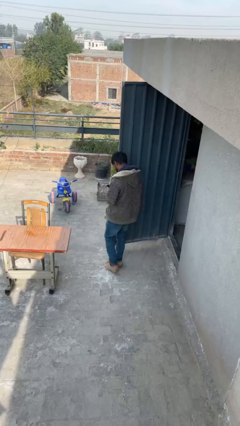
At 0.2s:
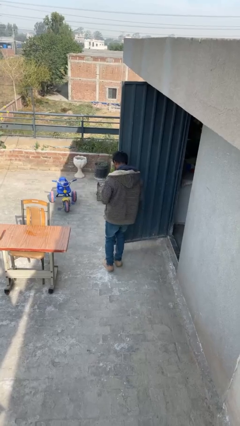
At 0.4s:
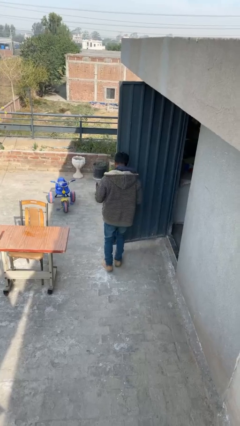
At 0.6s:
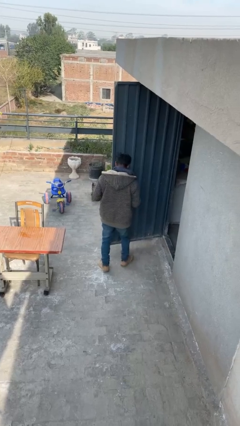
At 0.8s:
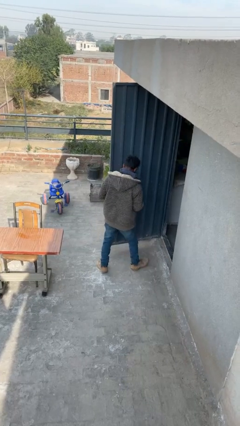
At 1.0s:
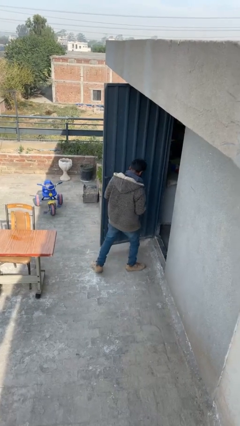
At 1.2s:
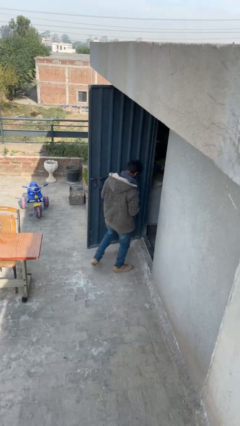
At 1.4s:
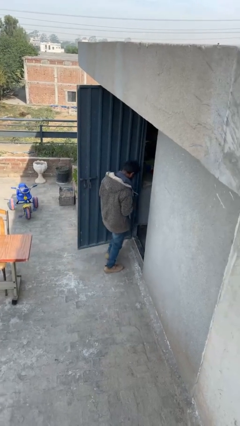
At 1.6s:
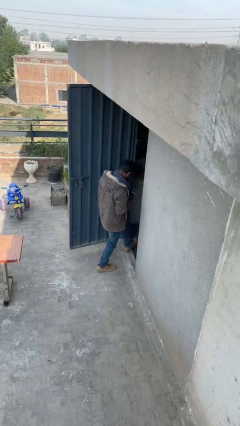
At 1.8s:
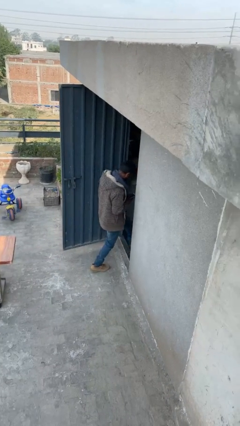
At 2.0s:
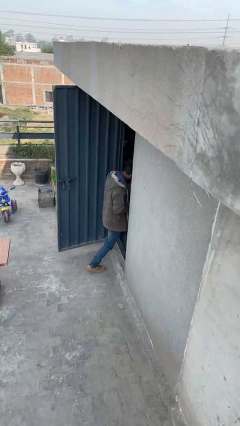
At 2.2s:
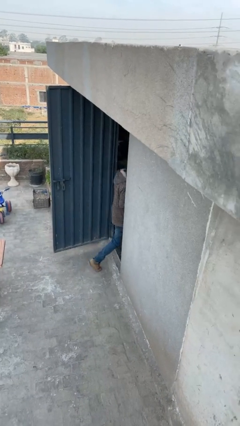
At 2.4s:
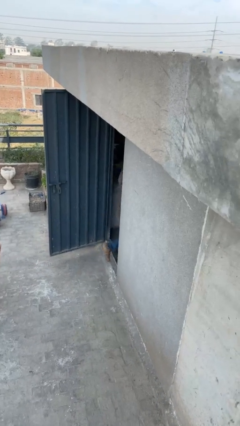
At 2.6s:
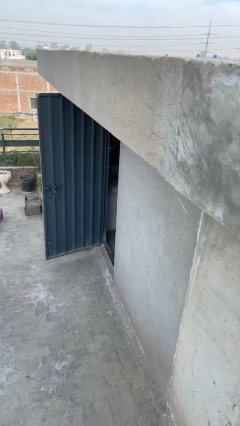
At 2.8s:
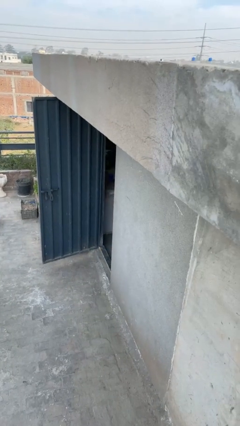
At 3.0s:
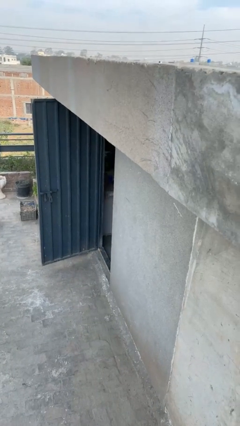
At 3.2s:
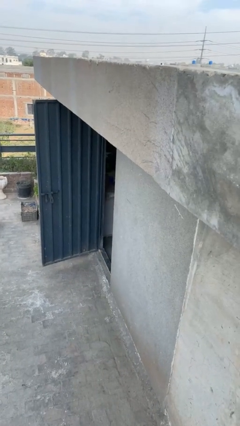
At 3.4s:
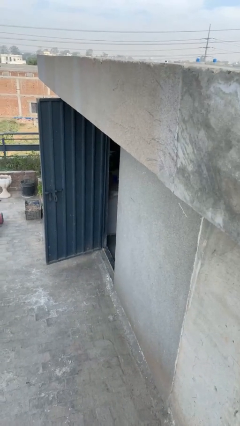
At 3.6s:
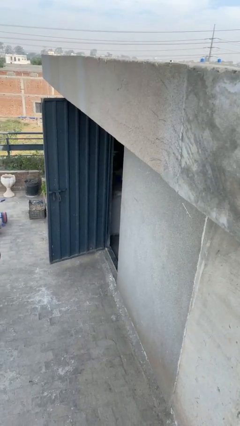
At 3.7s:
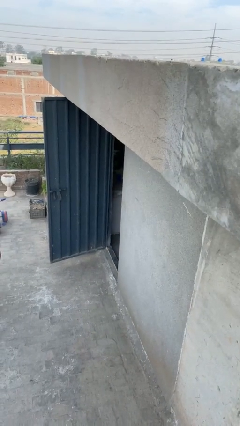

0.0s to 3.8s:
person exits scene through structure

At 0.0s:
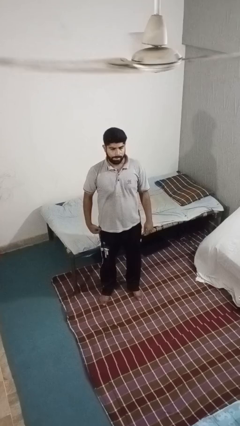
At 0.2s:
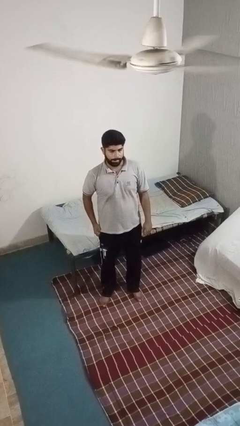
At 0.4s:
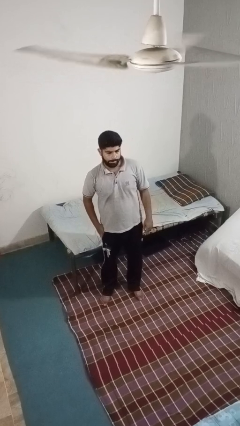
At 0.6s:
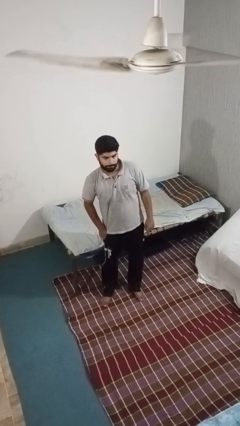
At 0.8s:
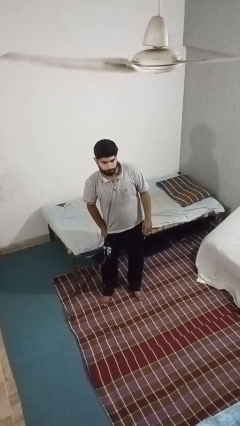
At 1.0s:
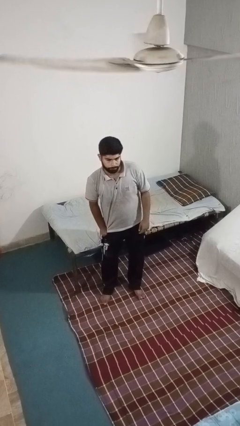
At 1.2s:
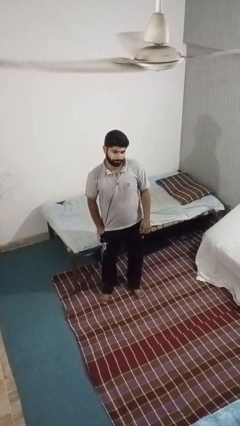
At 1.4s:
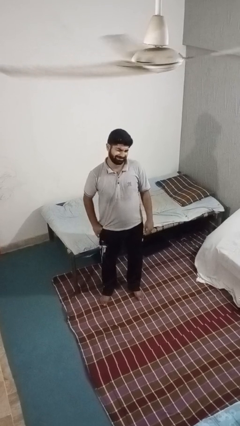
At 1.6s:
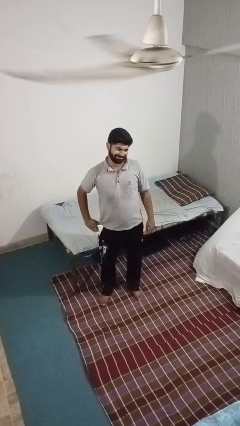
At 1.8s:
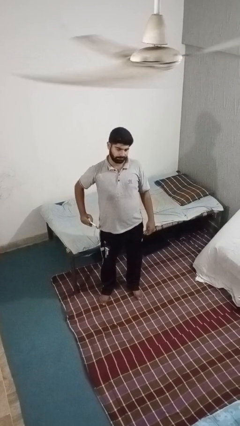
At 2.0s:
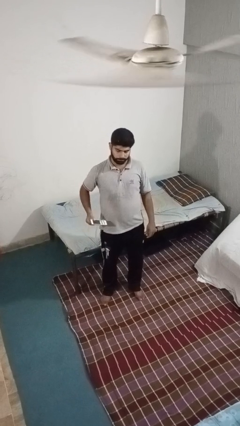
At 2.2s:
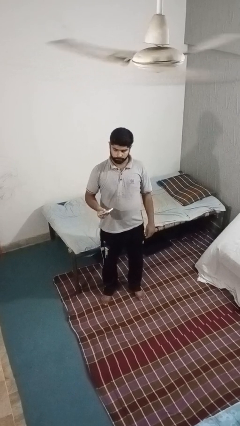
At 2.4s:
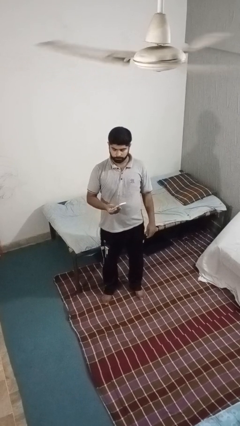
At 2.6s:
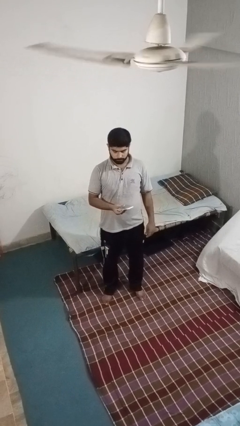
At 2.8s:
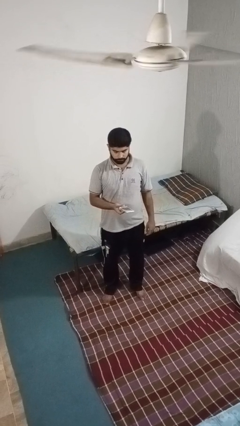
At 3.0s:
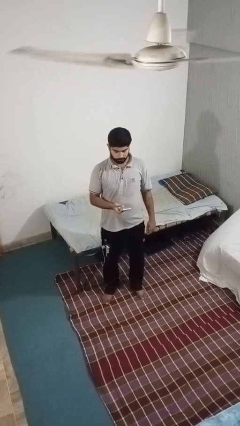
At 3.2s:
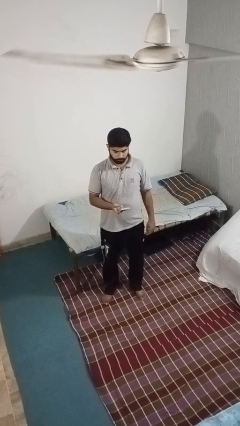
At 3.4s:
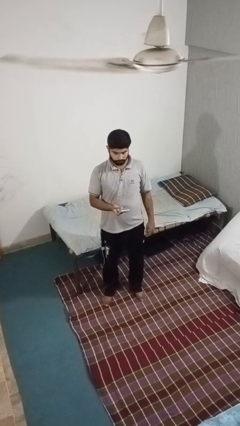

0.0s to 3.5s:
person takes phone from pocket

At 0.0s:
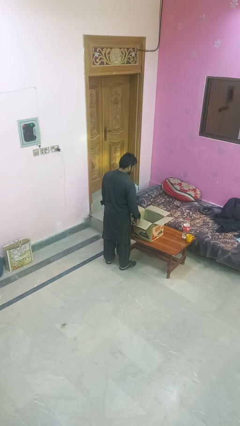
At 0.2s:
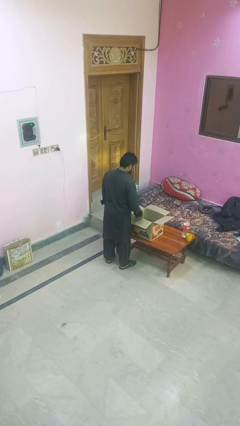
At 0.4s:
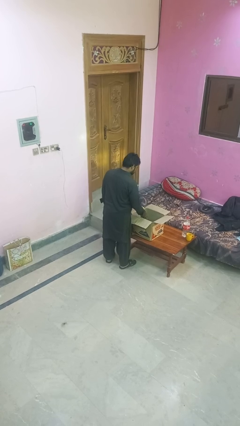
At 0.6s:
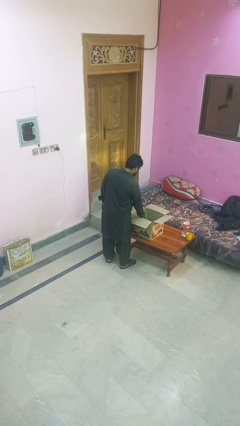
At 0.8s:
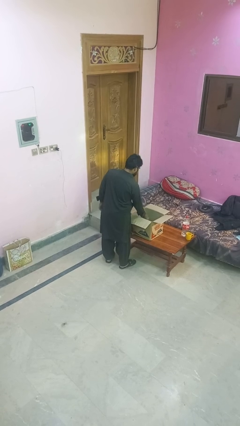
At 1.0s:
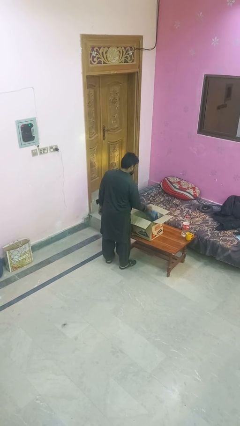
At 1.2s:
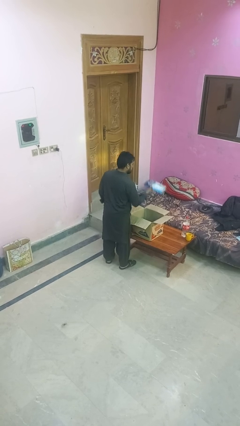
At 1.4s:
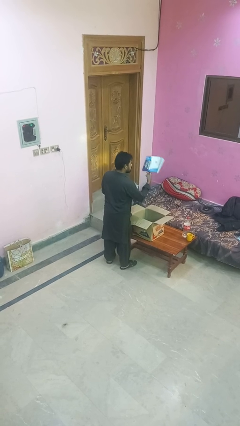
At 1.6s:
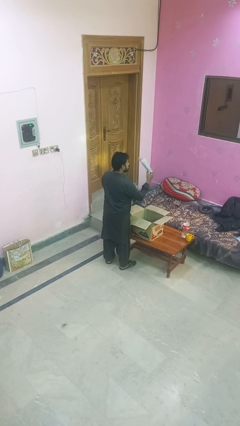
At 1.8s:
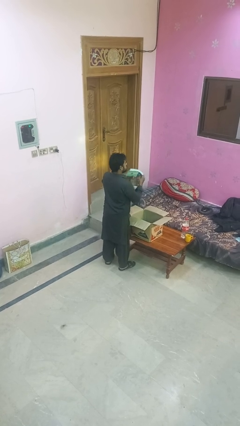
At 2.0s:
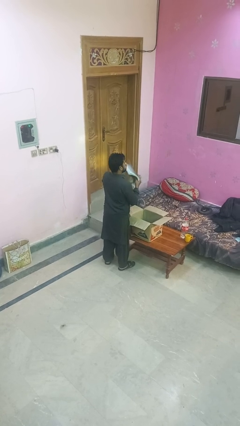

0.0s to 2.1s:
person takes object from box

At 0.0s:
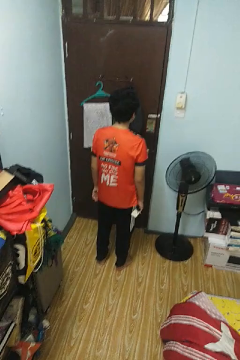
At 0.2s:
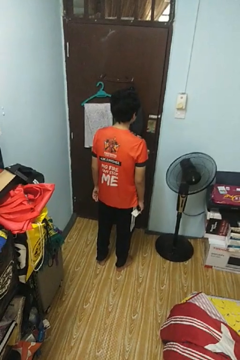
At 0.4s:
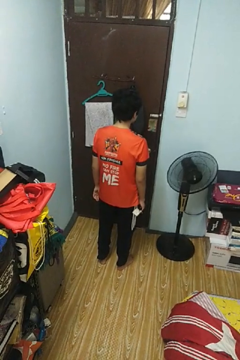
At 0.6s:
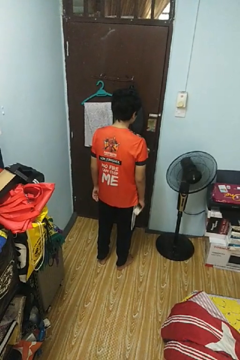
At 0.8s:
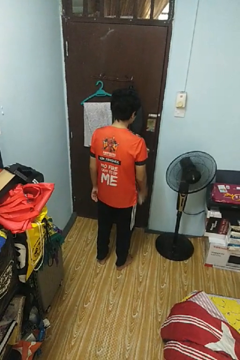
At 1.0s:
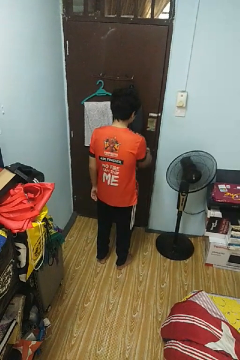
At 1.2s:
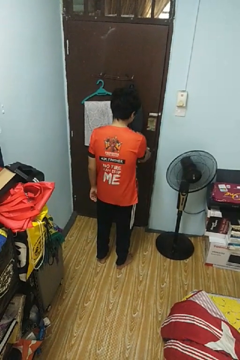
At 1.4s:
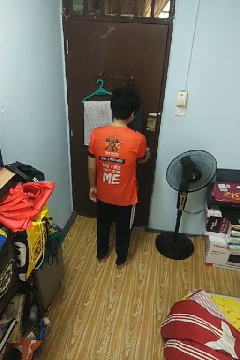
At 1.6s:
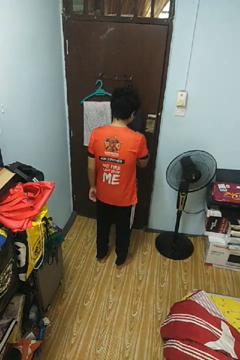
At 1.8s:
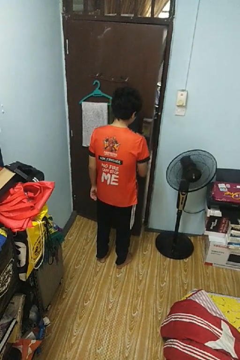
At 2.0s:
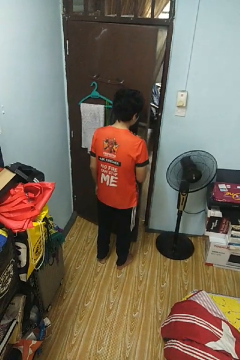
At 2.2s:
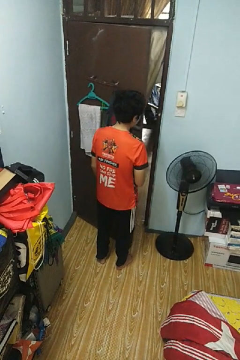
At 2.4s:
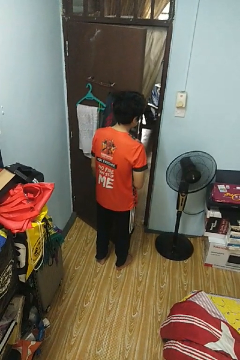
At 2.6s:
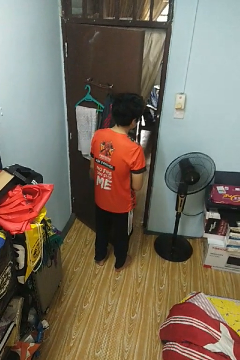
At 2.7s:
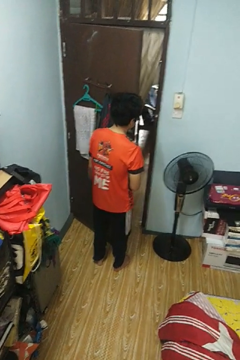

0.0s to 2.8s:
person opens facility door

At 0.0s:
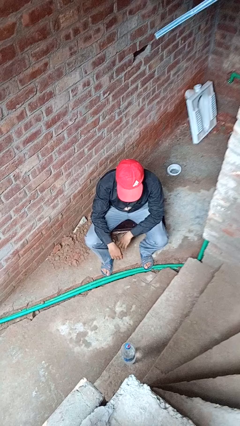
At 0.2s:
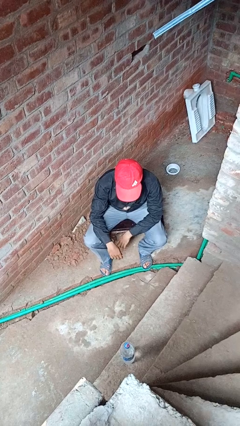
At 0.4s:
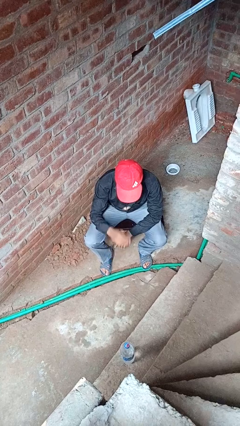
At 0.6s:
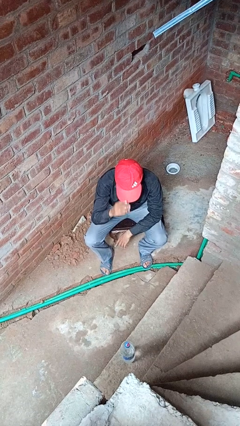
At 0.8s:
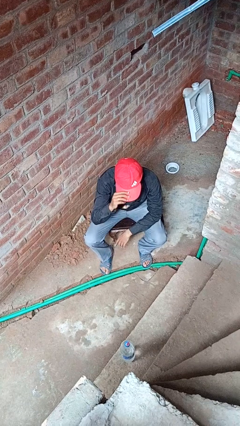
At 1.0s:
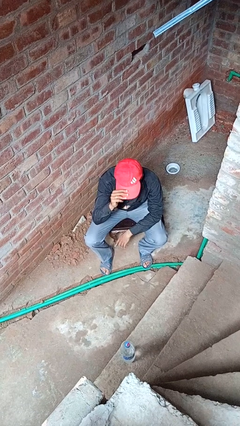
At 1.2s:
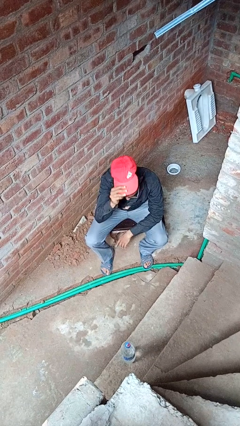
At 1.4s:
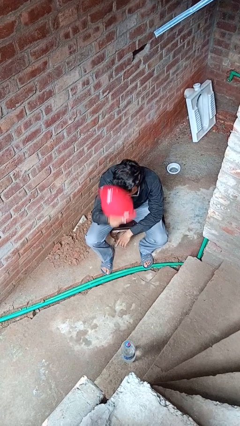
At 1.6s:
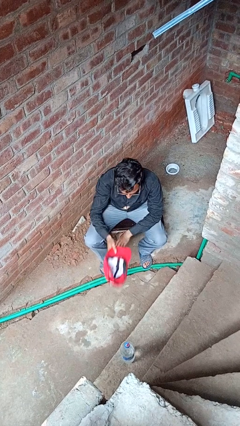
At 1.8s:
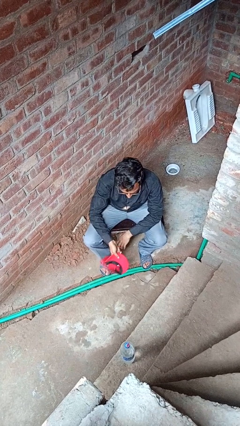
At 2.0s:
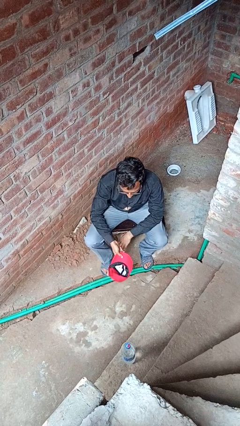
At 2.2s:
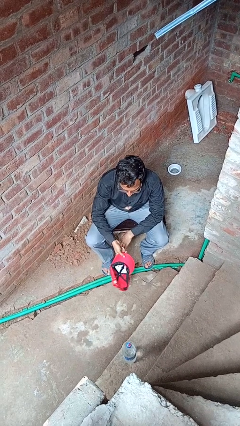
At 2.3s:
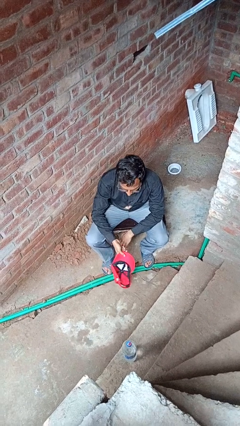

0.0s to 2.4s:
person takes off hat

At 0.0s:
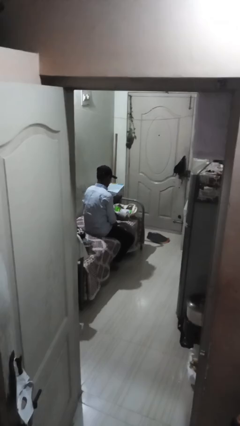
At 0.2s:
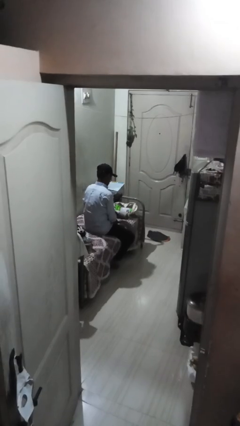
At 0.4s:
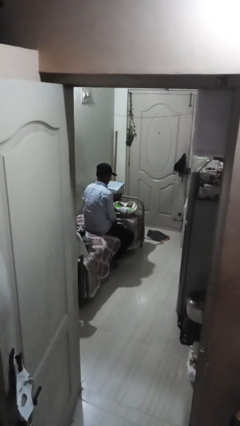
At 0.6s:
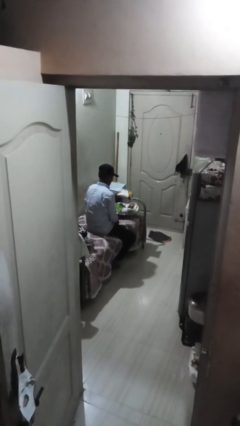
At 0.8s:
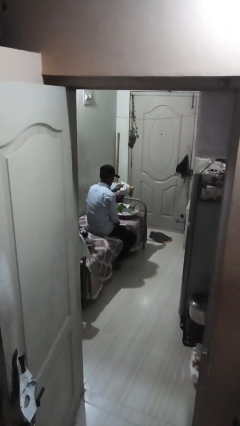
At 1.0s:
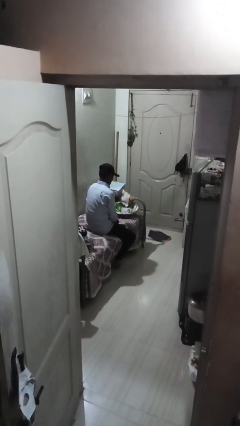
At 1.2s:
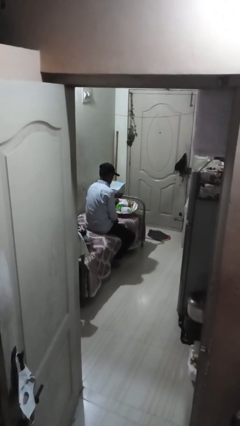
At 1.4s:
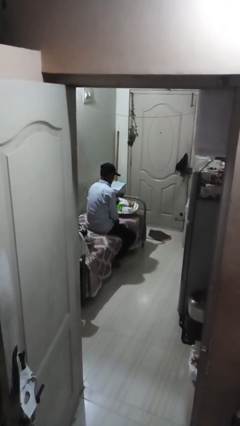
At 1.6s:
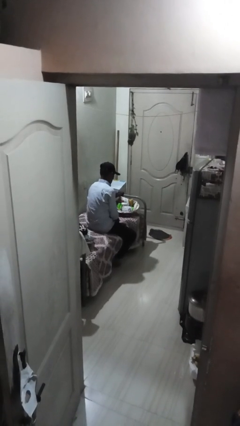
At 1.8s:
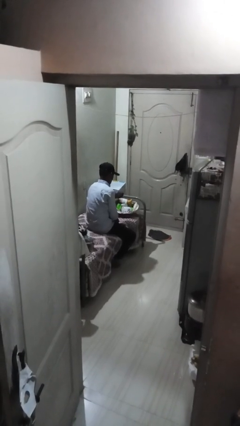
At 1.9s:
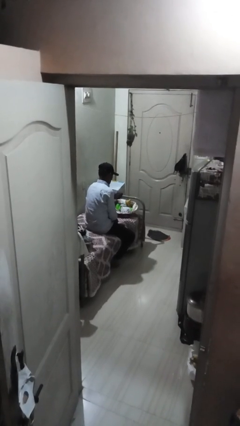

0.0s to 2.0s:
person puts object into bag

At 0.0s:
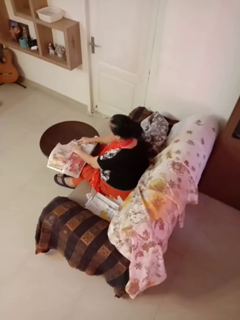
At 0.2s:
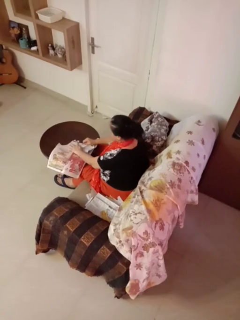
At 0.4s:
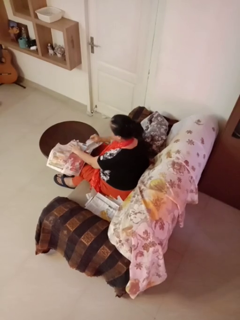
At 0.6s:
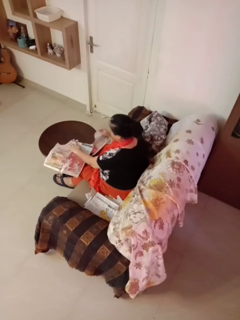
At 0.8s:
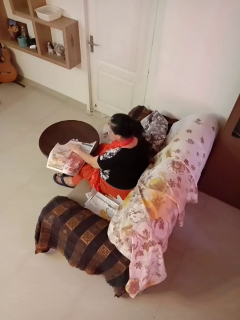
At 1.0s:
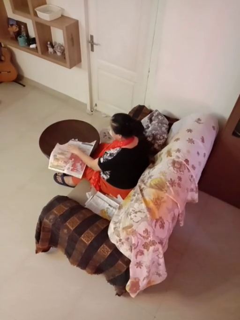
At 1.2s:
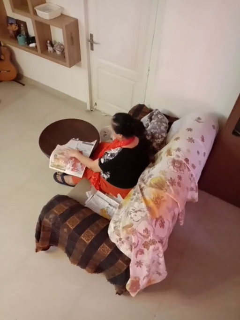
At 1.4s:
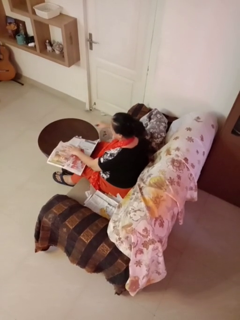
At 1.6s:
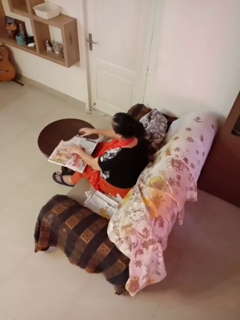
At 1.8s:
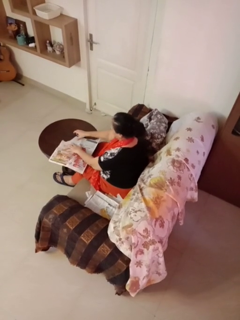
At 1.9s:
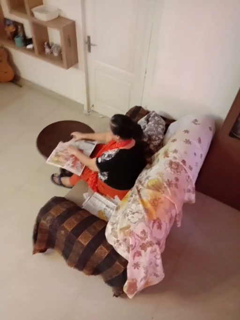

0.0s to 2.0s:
person tears paper
